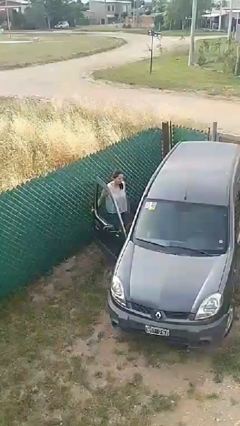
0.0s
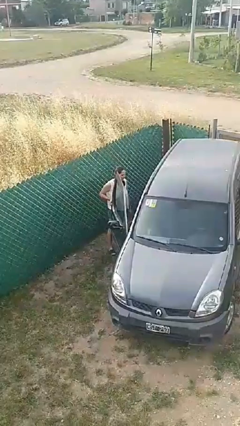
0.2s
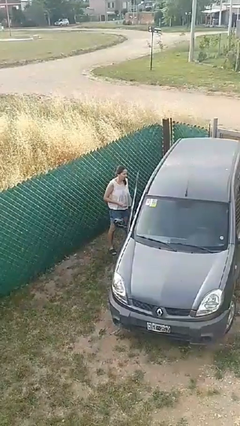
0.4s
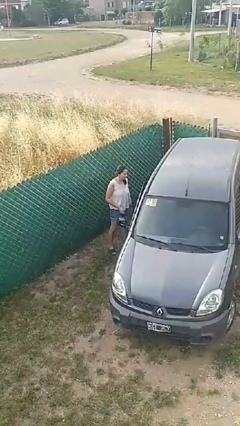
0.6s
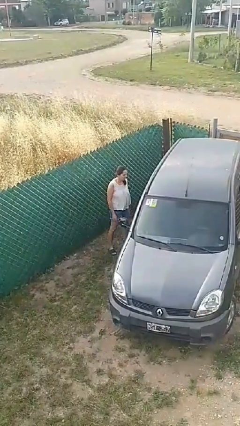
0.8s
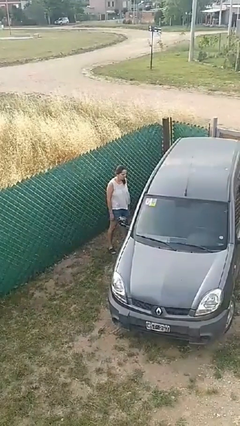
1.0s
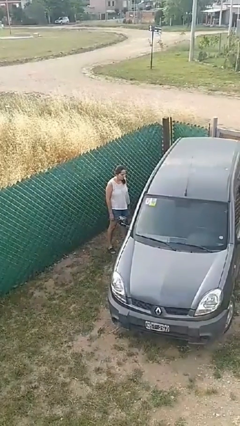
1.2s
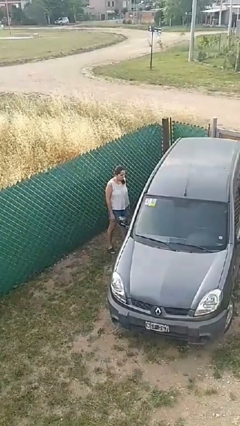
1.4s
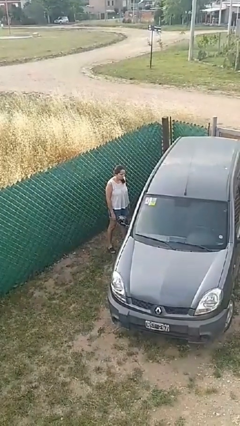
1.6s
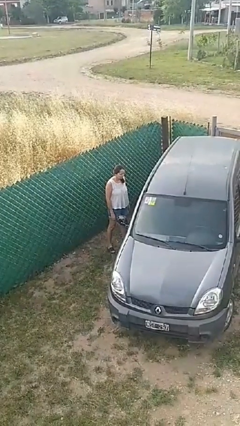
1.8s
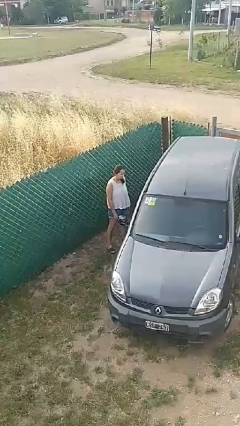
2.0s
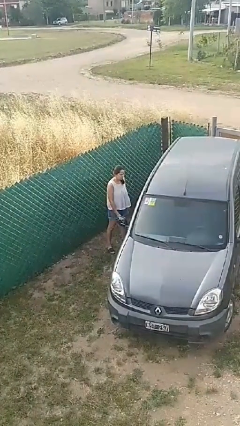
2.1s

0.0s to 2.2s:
person closes car door

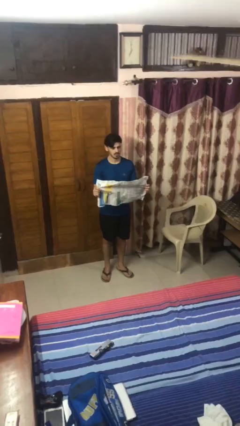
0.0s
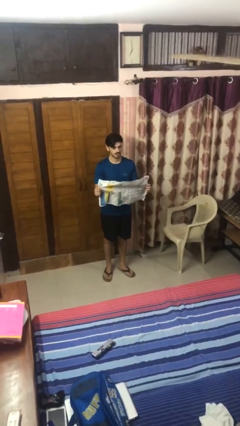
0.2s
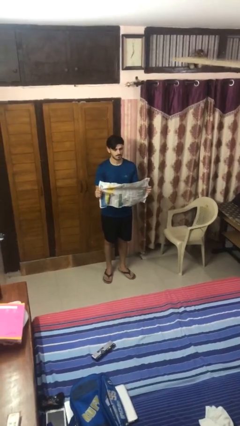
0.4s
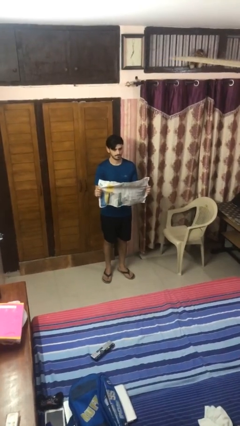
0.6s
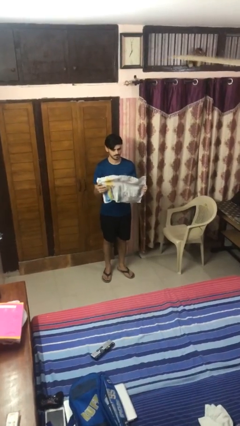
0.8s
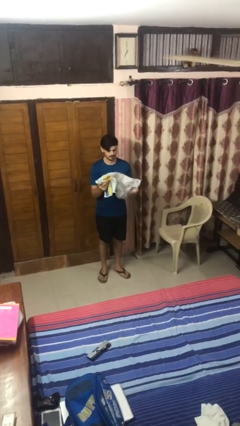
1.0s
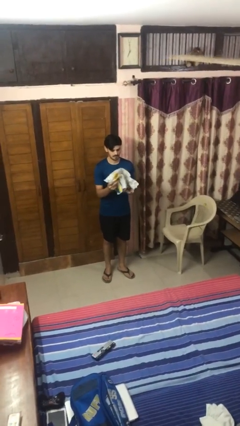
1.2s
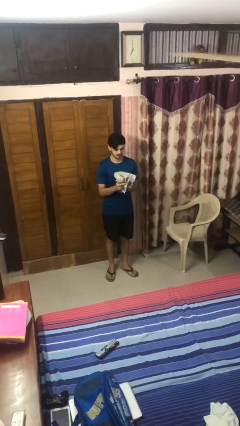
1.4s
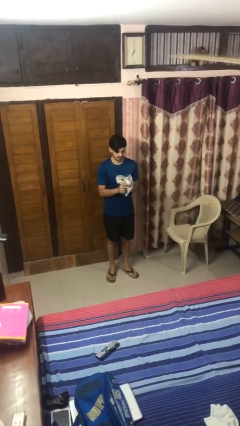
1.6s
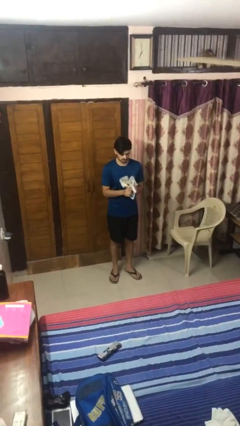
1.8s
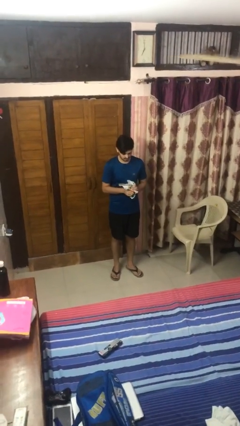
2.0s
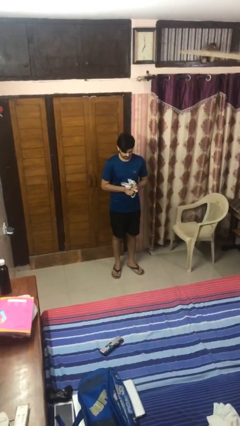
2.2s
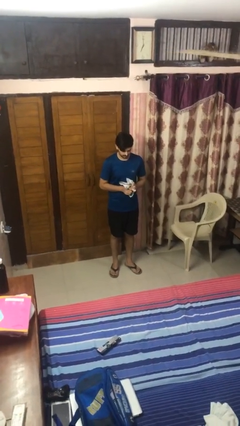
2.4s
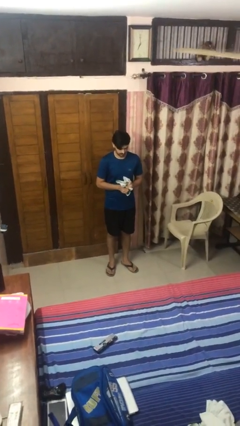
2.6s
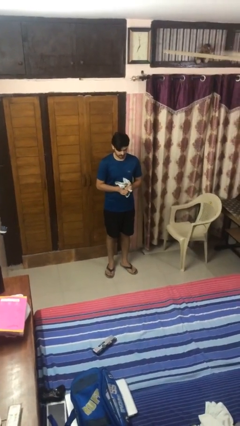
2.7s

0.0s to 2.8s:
person crumples paper

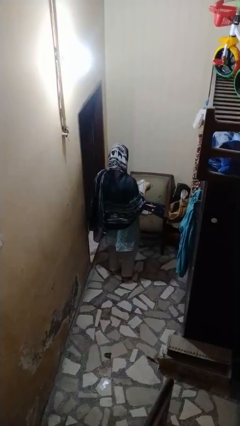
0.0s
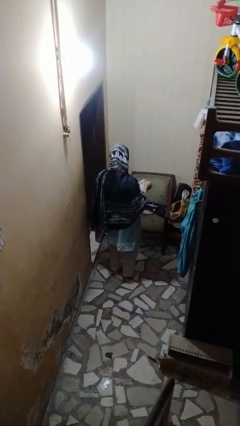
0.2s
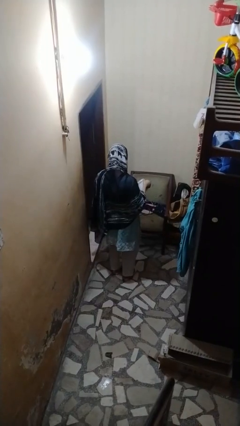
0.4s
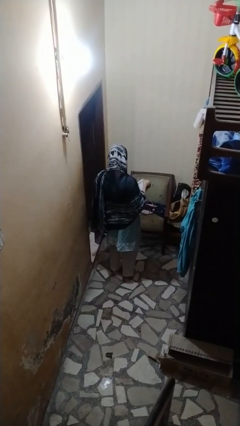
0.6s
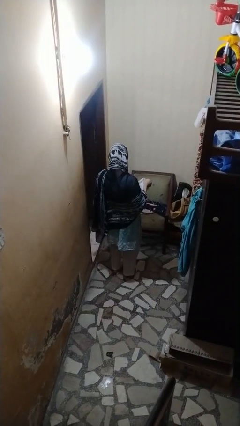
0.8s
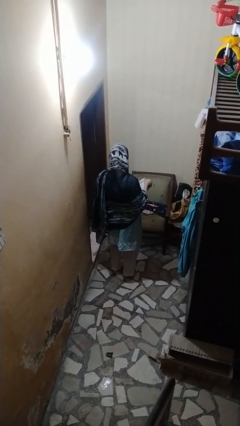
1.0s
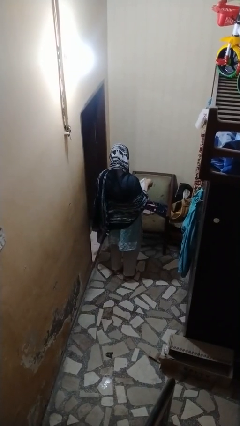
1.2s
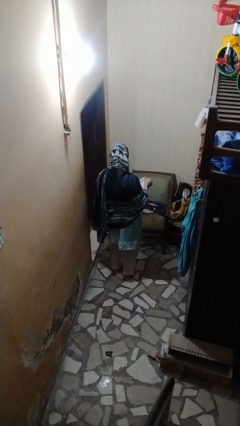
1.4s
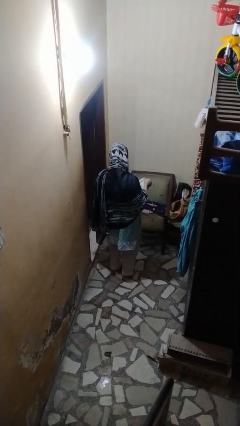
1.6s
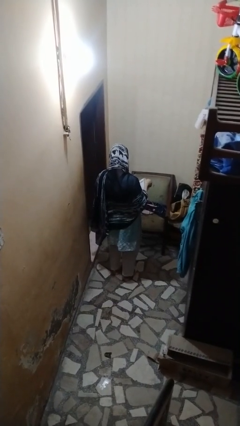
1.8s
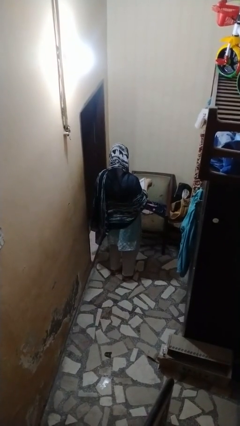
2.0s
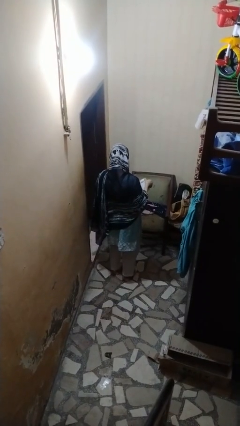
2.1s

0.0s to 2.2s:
person pours coffee into mug

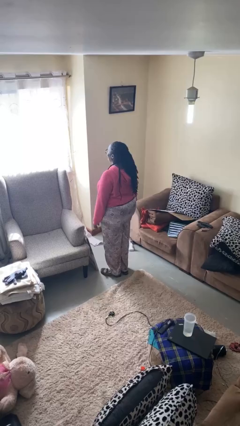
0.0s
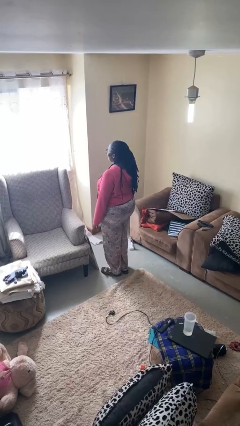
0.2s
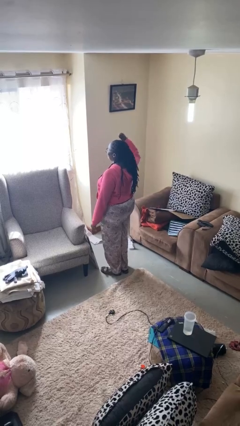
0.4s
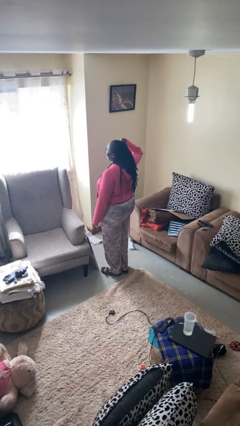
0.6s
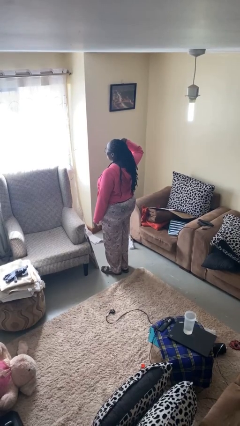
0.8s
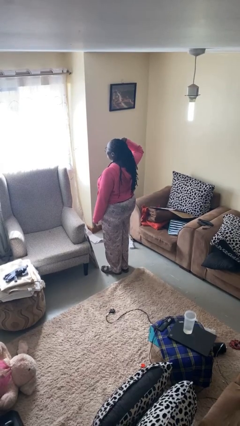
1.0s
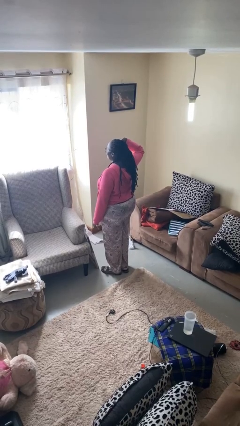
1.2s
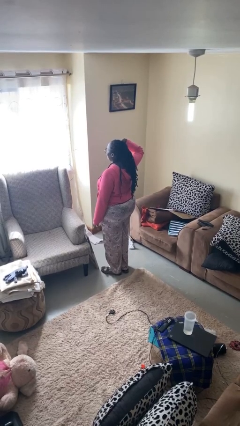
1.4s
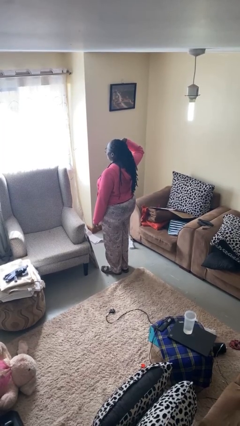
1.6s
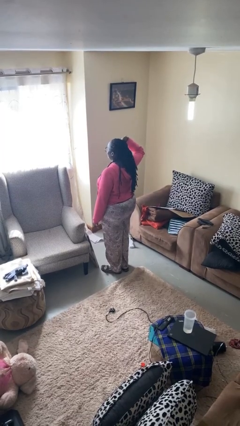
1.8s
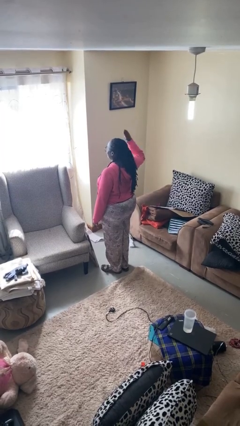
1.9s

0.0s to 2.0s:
person salutes

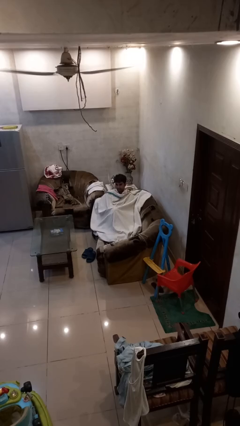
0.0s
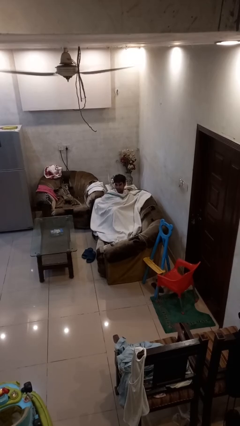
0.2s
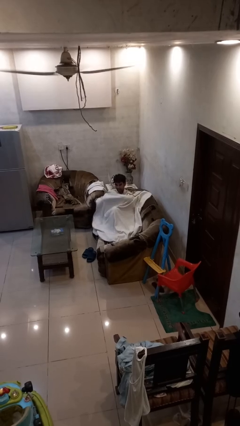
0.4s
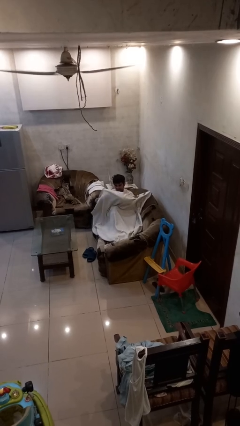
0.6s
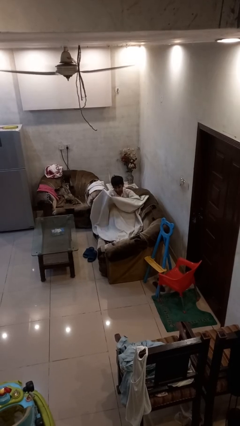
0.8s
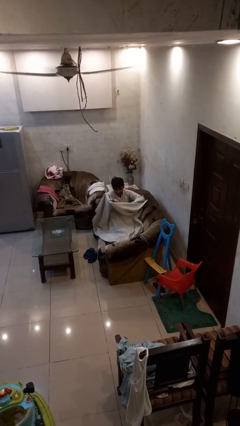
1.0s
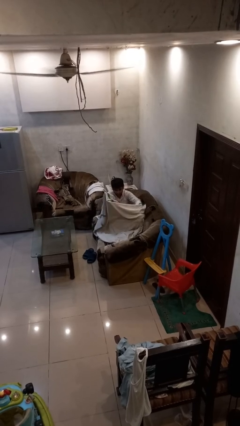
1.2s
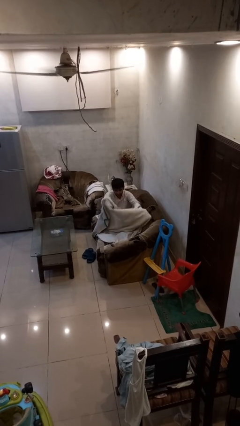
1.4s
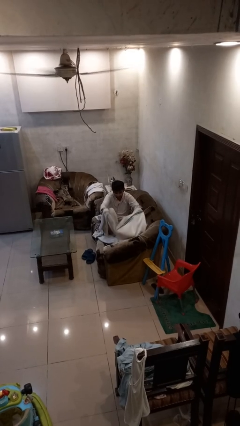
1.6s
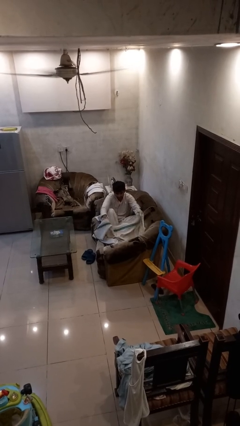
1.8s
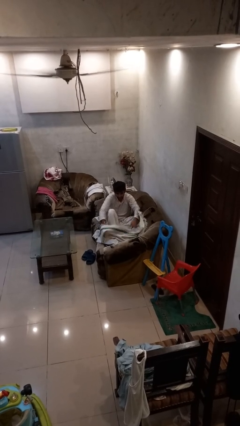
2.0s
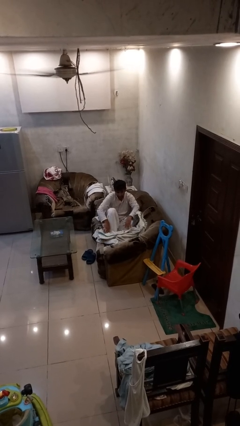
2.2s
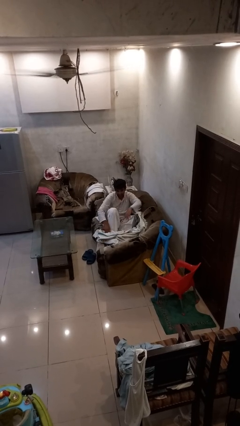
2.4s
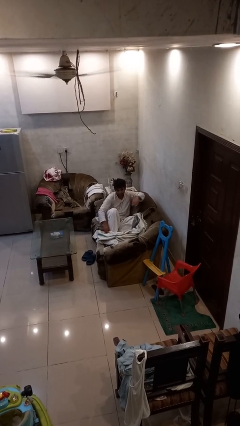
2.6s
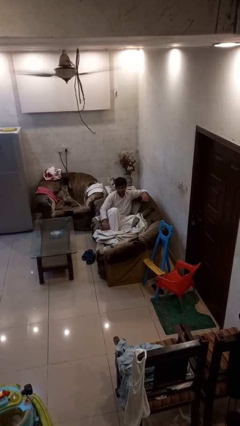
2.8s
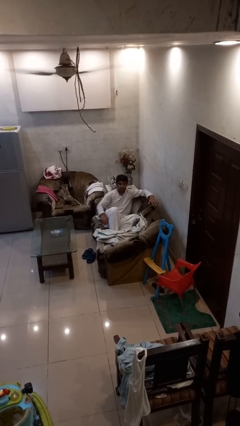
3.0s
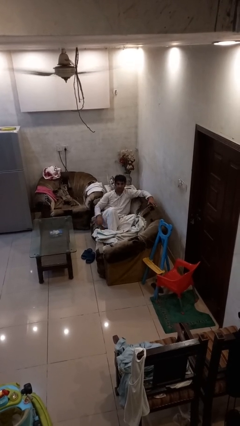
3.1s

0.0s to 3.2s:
person uncovers with blanket

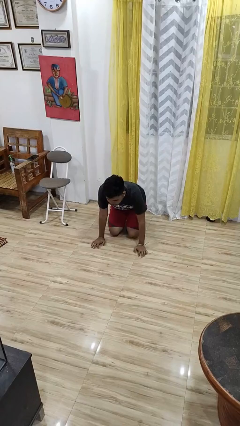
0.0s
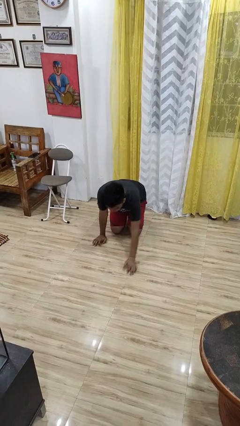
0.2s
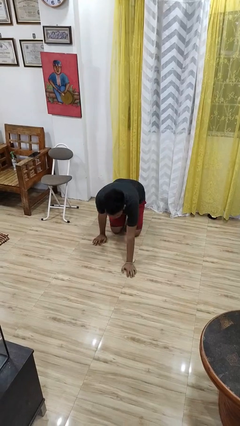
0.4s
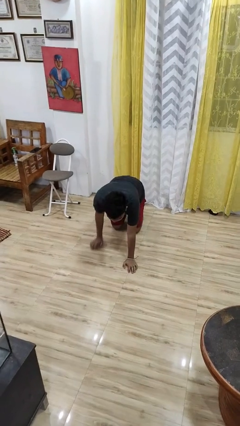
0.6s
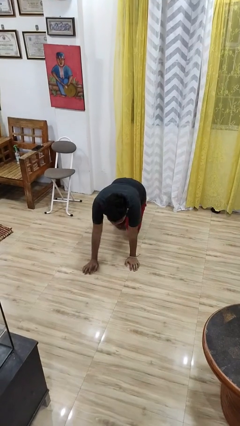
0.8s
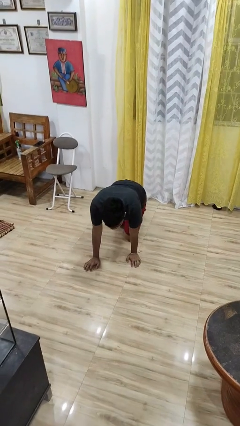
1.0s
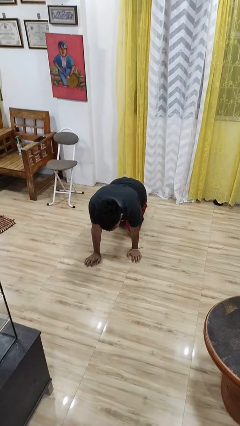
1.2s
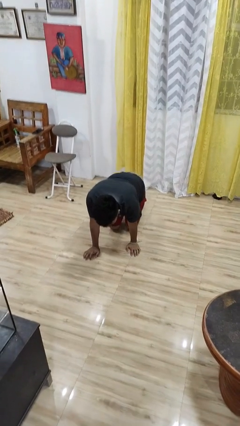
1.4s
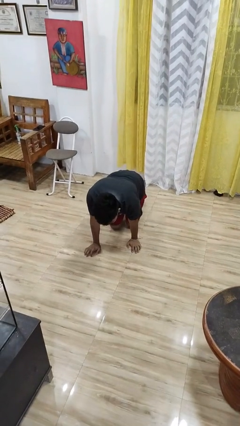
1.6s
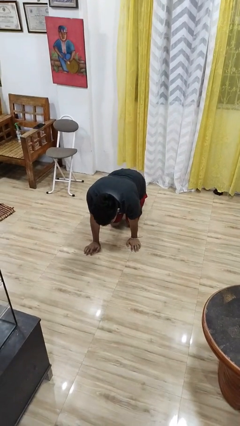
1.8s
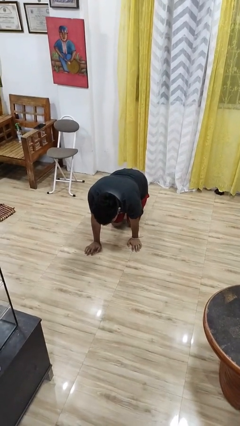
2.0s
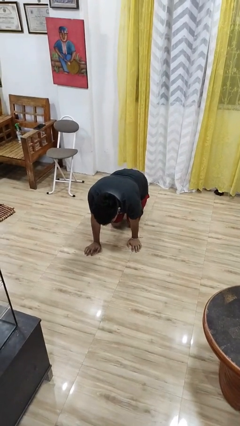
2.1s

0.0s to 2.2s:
person crawls

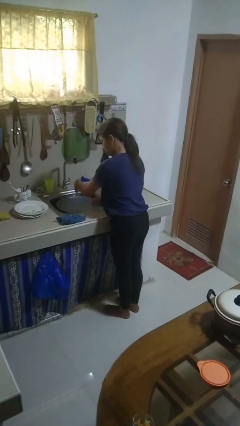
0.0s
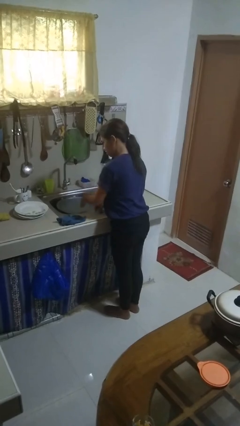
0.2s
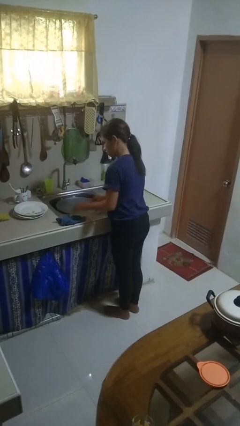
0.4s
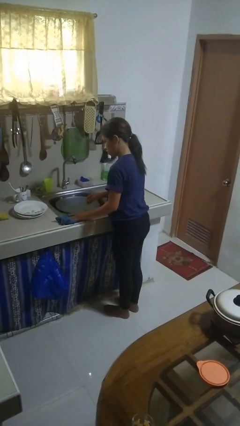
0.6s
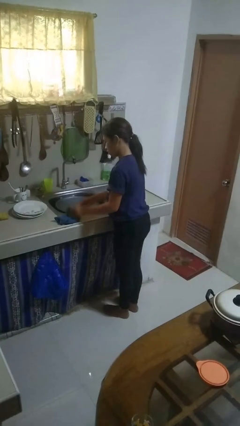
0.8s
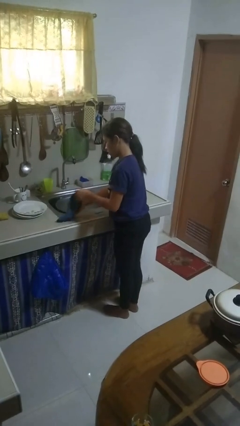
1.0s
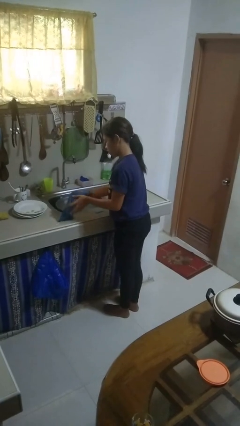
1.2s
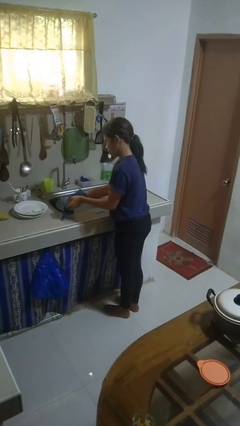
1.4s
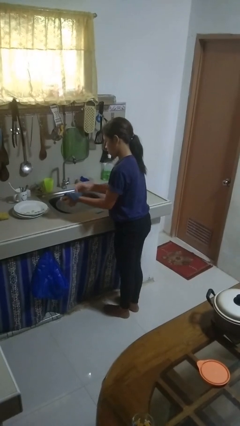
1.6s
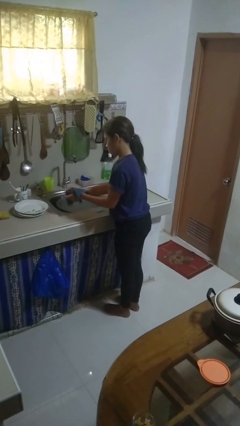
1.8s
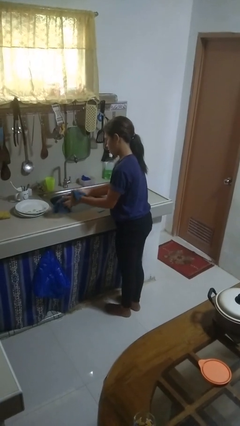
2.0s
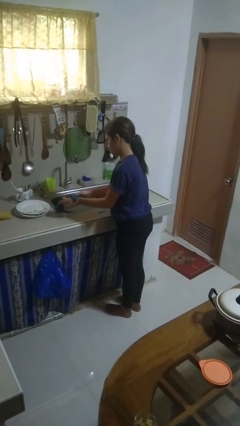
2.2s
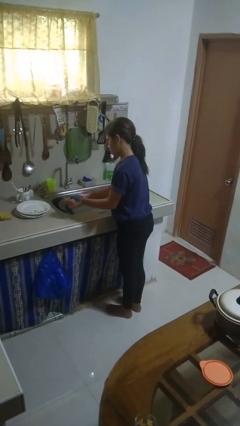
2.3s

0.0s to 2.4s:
person dries hands with towel

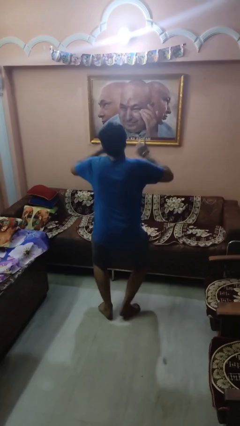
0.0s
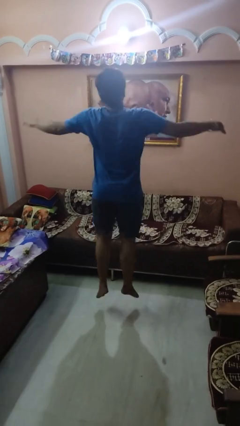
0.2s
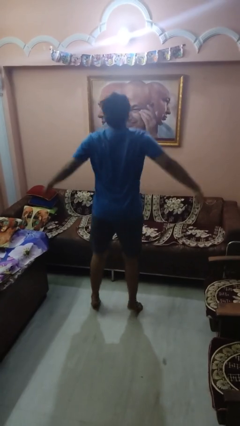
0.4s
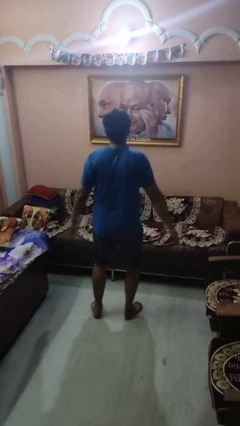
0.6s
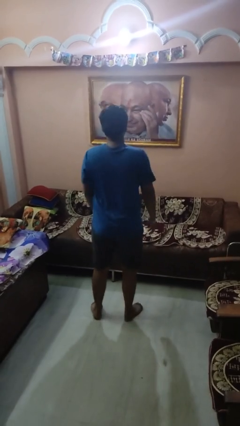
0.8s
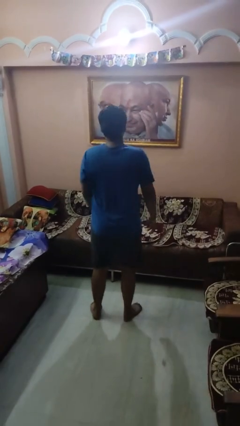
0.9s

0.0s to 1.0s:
person jumps
